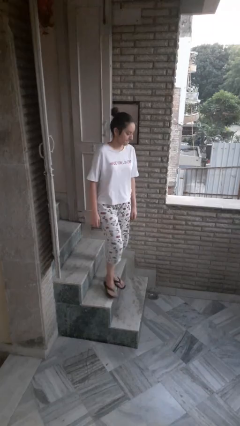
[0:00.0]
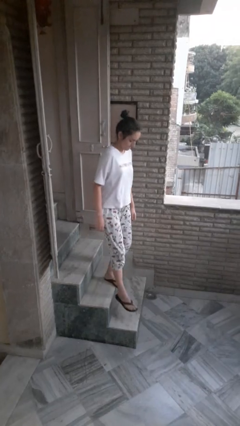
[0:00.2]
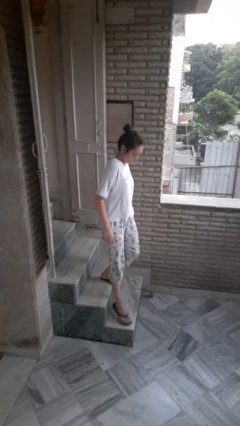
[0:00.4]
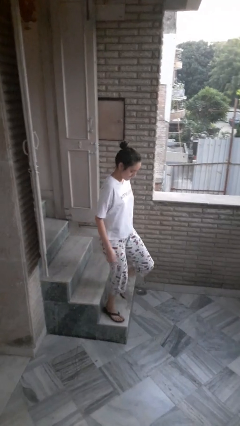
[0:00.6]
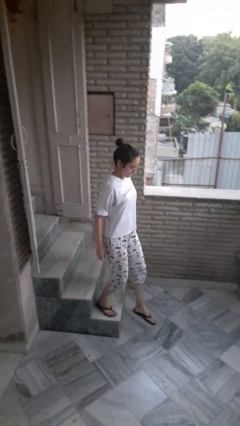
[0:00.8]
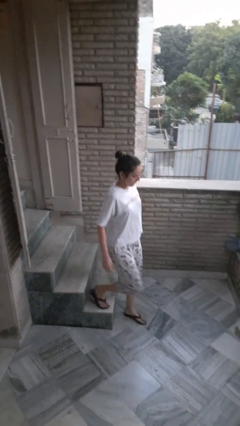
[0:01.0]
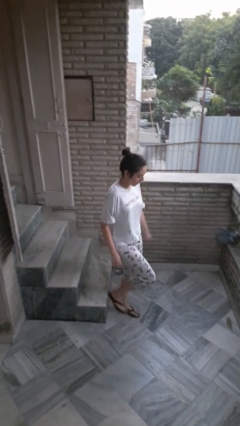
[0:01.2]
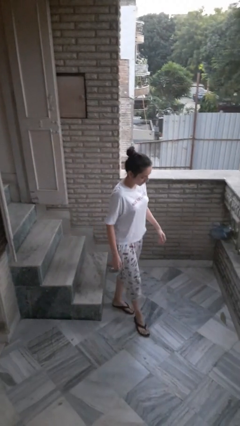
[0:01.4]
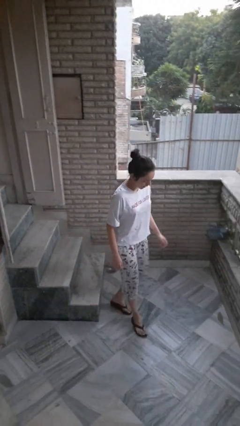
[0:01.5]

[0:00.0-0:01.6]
person climbs down stairs

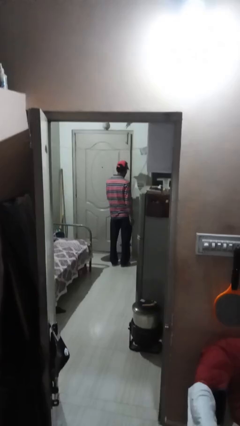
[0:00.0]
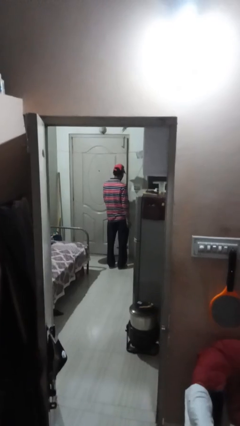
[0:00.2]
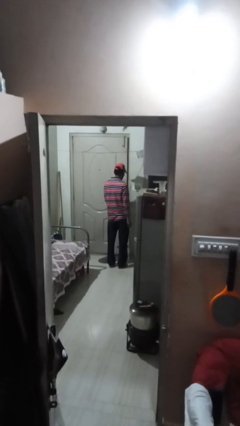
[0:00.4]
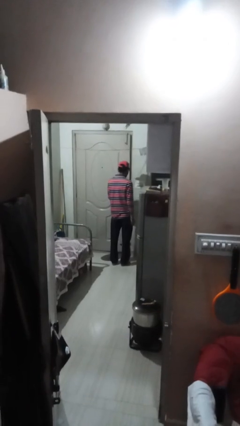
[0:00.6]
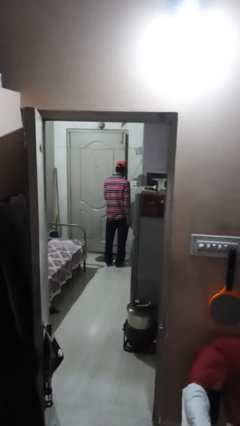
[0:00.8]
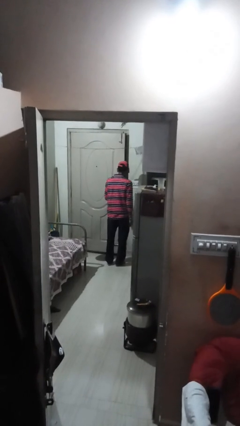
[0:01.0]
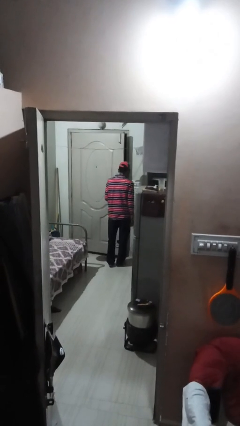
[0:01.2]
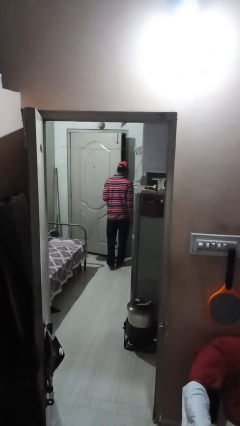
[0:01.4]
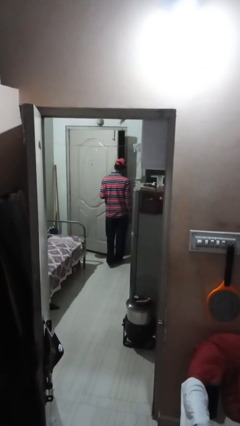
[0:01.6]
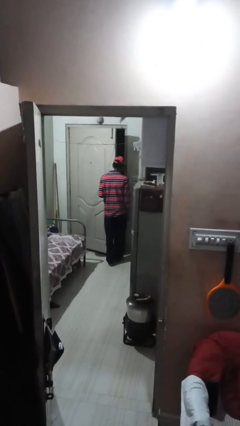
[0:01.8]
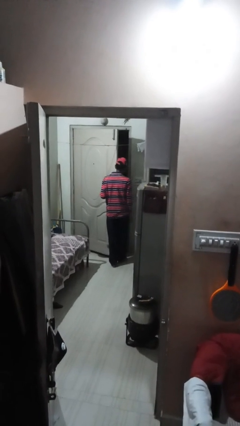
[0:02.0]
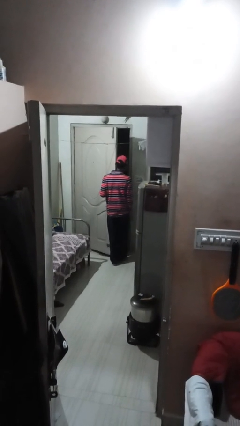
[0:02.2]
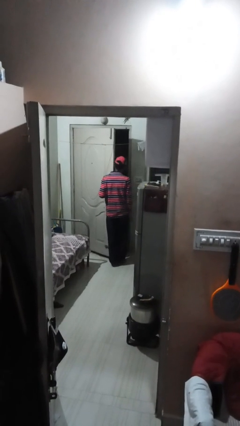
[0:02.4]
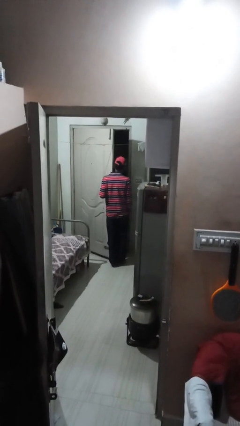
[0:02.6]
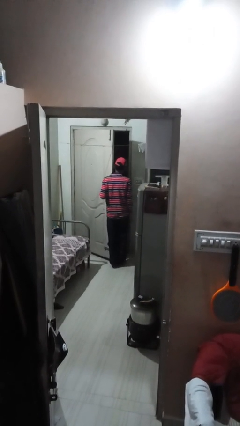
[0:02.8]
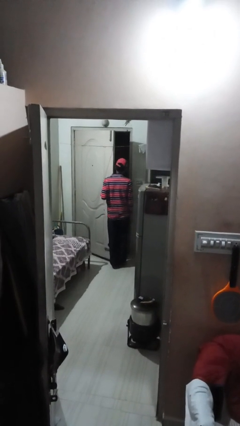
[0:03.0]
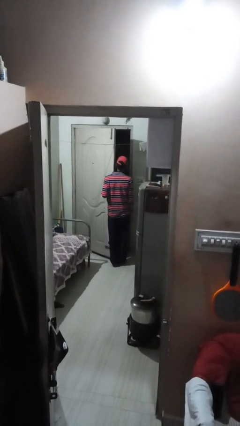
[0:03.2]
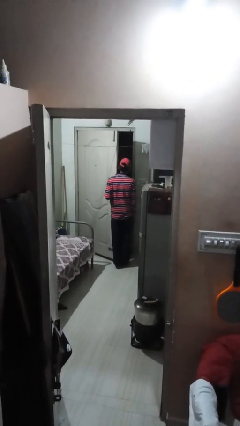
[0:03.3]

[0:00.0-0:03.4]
person opens facility door

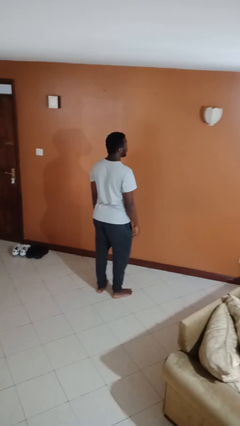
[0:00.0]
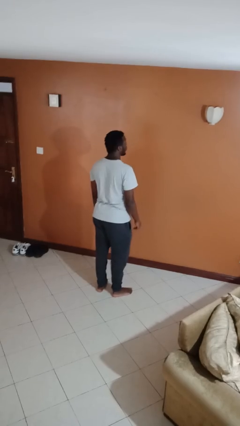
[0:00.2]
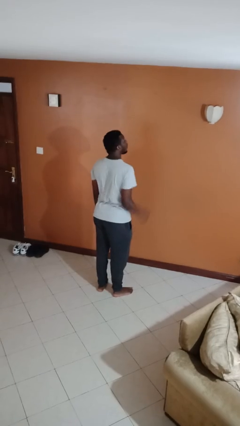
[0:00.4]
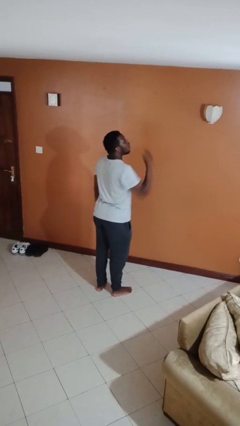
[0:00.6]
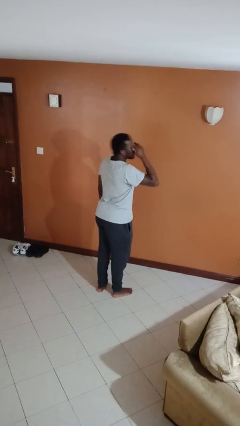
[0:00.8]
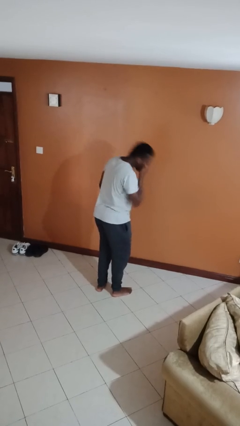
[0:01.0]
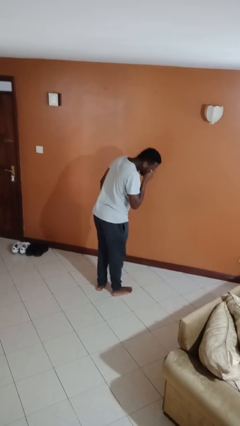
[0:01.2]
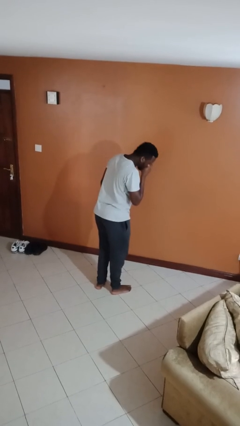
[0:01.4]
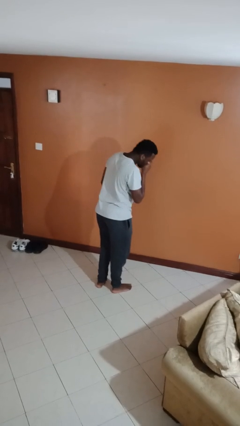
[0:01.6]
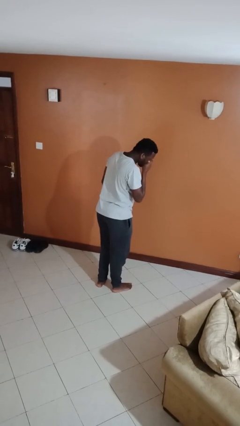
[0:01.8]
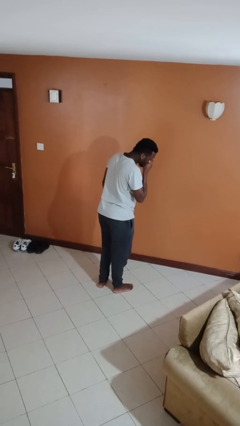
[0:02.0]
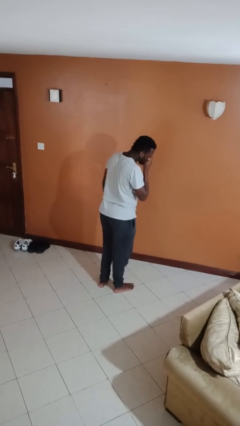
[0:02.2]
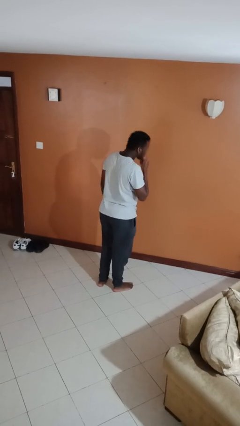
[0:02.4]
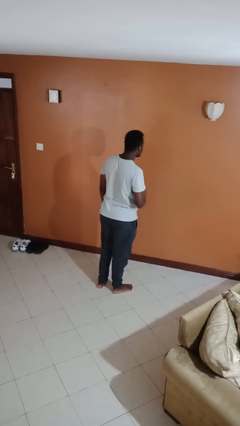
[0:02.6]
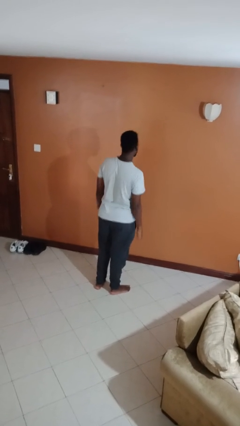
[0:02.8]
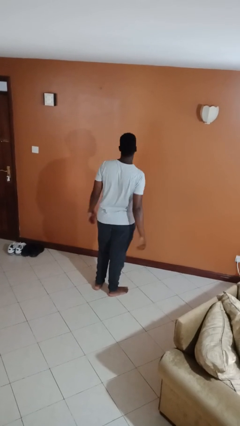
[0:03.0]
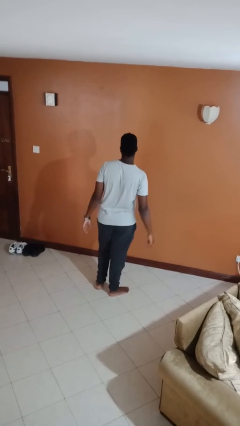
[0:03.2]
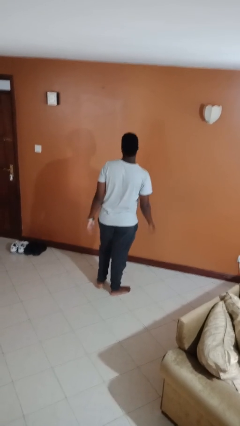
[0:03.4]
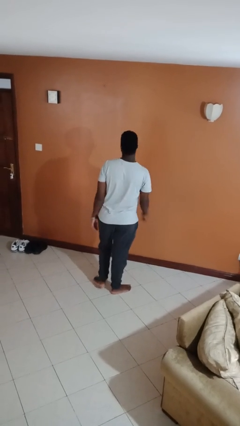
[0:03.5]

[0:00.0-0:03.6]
person sneezes into hand

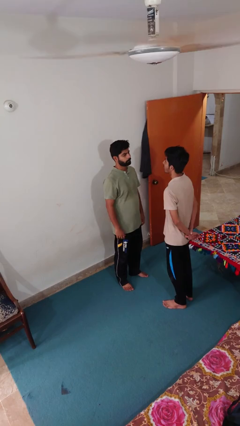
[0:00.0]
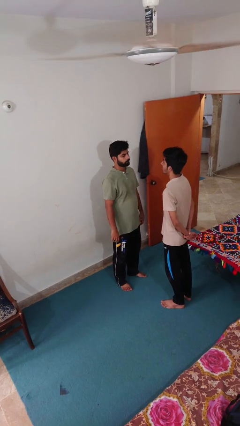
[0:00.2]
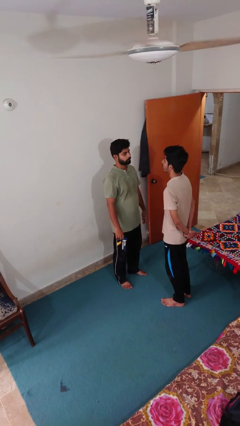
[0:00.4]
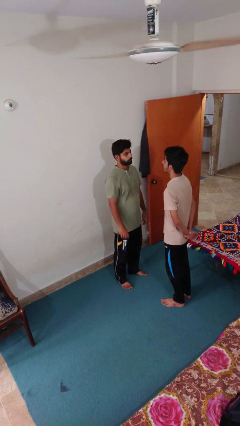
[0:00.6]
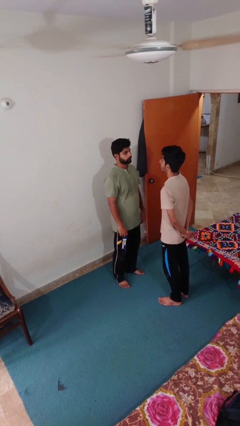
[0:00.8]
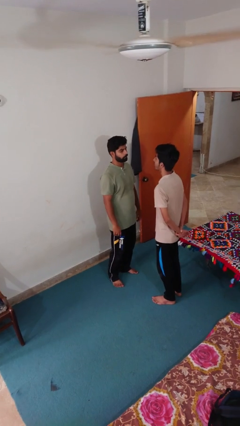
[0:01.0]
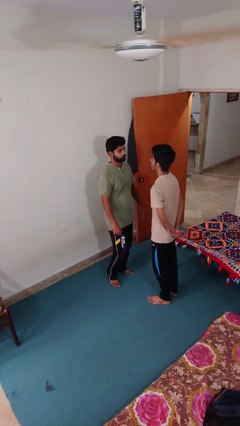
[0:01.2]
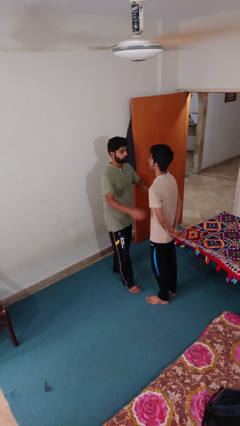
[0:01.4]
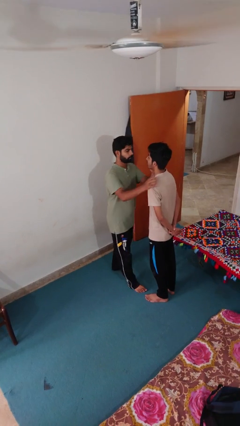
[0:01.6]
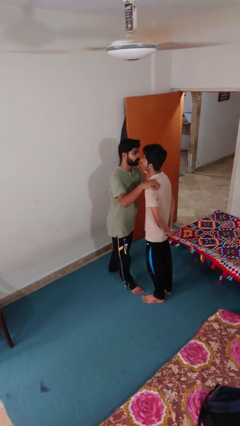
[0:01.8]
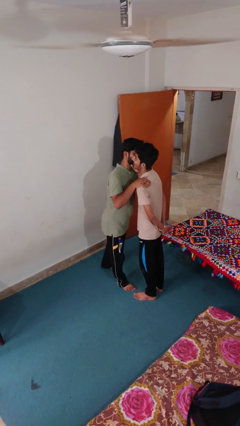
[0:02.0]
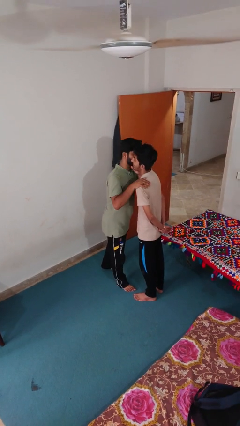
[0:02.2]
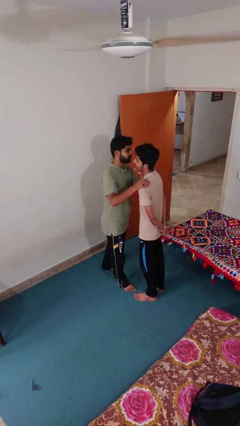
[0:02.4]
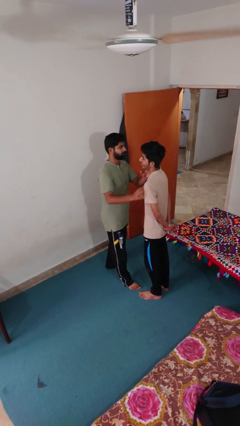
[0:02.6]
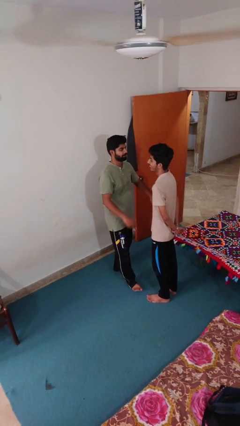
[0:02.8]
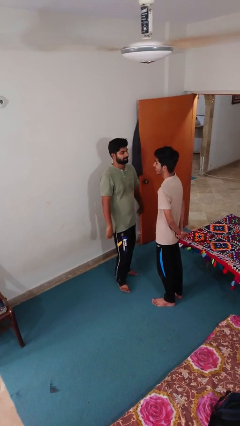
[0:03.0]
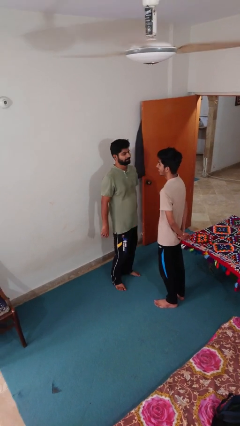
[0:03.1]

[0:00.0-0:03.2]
person kisses cheek of person

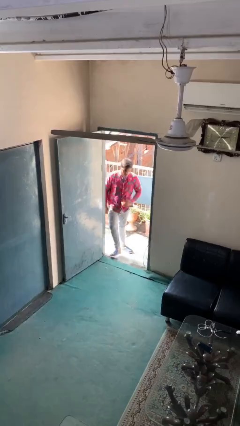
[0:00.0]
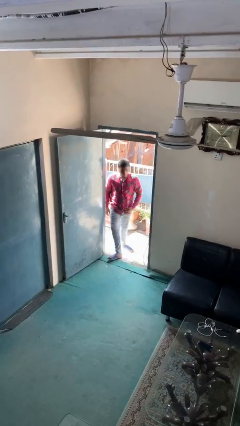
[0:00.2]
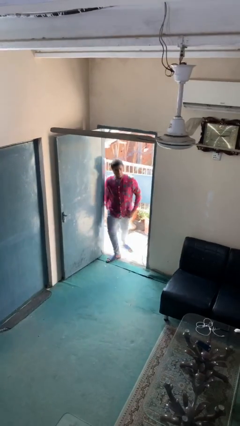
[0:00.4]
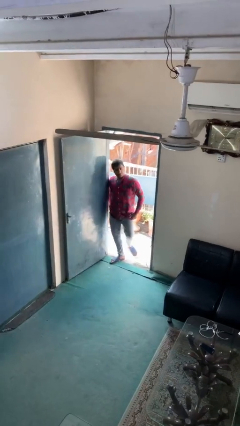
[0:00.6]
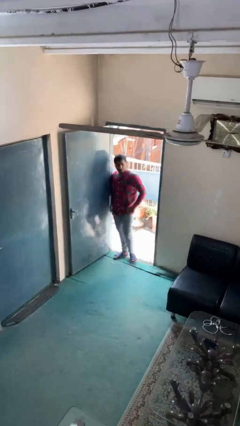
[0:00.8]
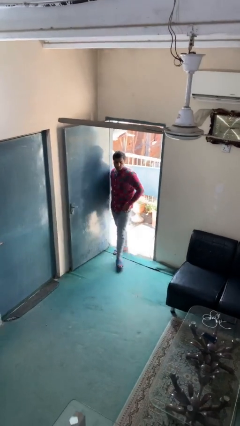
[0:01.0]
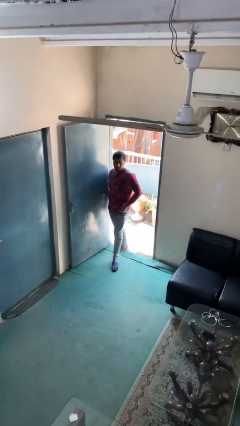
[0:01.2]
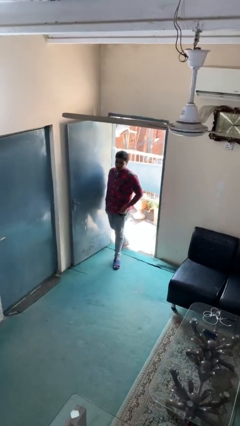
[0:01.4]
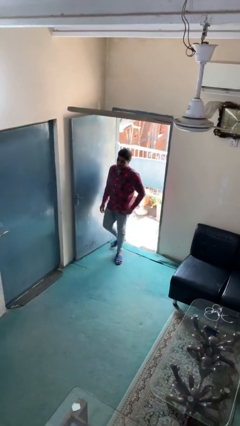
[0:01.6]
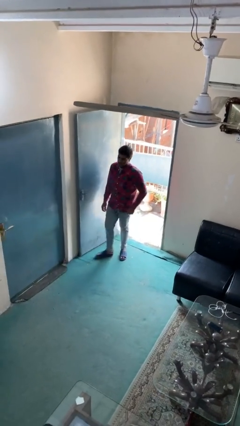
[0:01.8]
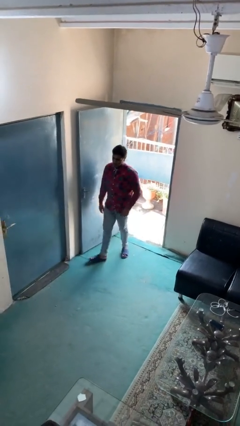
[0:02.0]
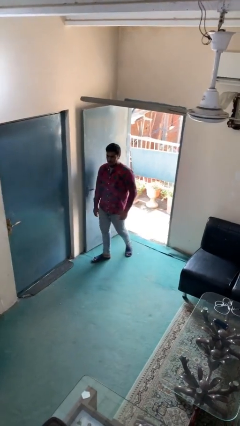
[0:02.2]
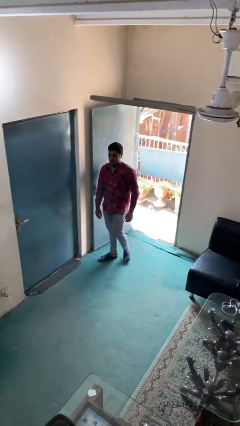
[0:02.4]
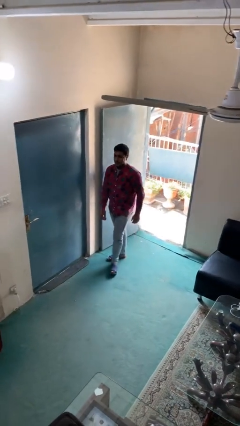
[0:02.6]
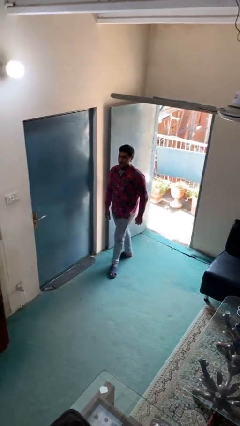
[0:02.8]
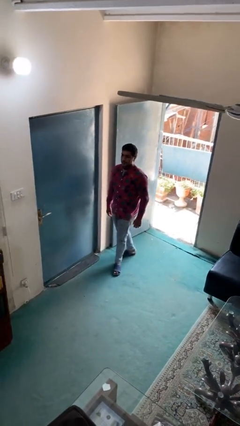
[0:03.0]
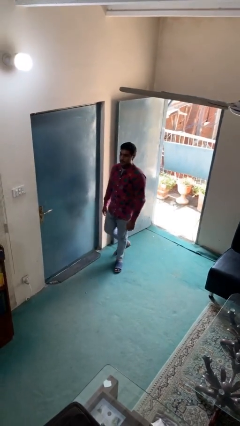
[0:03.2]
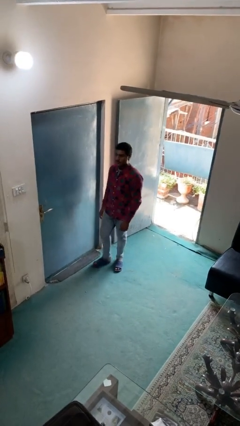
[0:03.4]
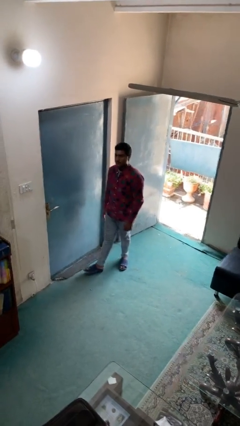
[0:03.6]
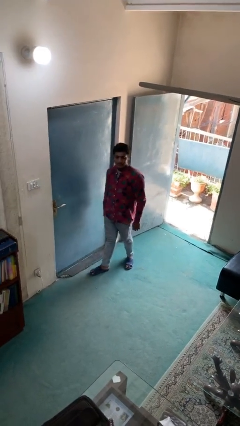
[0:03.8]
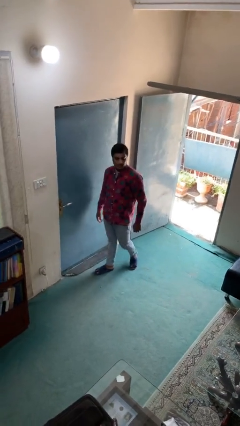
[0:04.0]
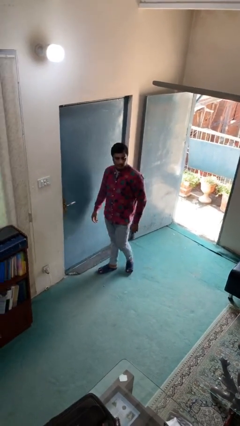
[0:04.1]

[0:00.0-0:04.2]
person enters scene through structure

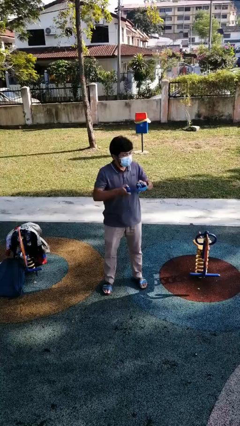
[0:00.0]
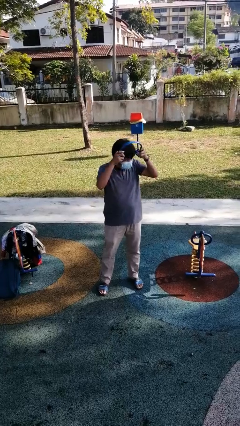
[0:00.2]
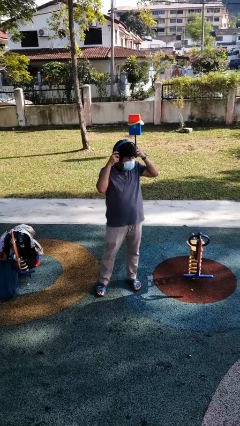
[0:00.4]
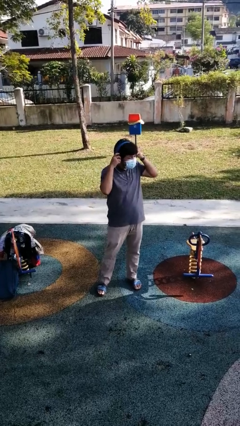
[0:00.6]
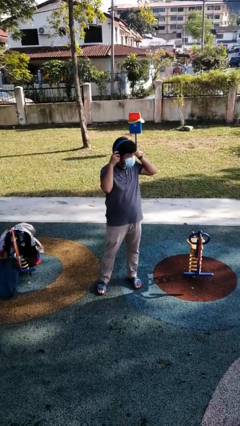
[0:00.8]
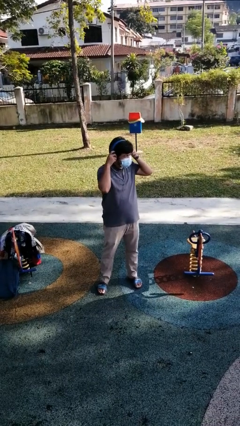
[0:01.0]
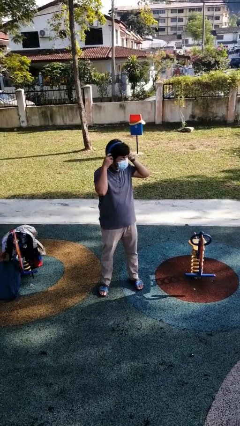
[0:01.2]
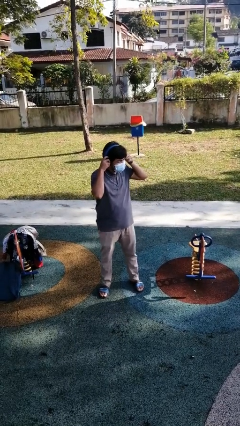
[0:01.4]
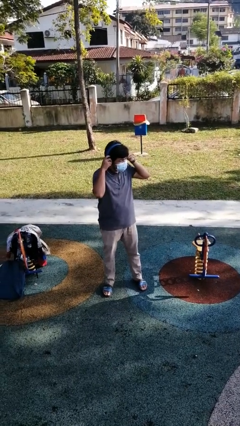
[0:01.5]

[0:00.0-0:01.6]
person puts on headphones
